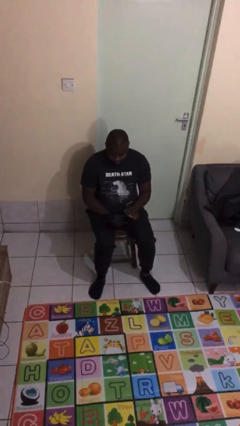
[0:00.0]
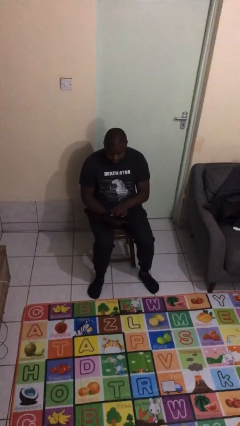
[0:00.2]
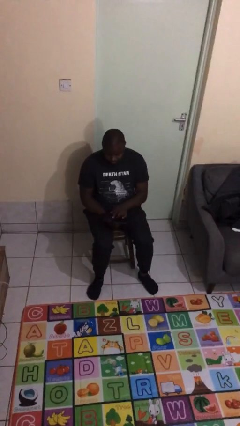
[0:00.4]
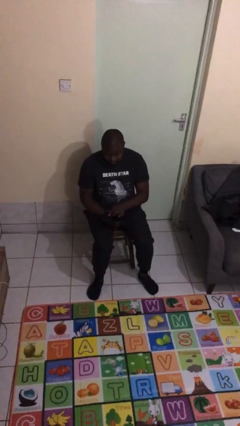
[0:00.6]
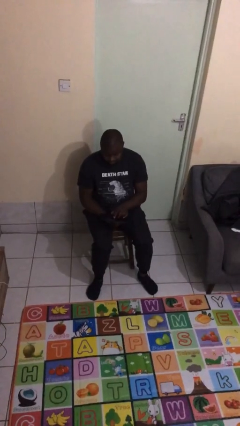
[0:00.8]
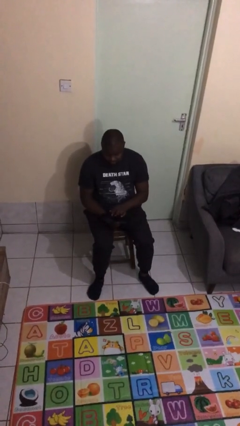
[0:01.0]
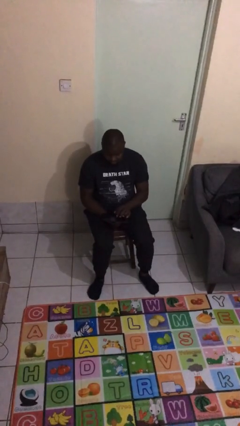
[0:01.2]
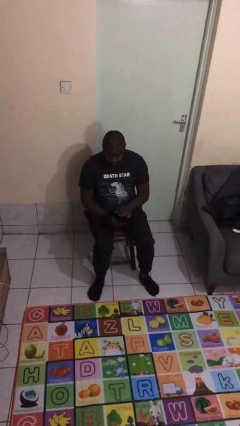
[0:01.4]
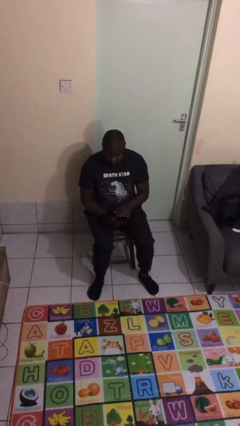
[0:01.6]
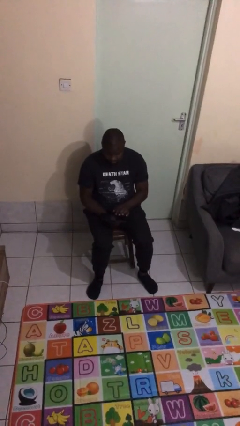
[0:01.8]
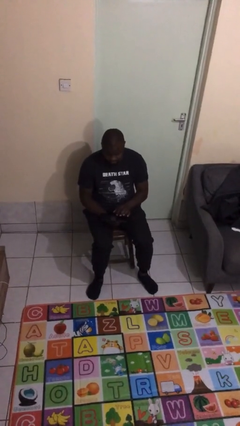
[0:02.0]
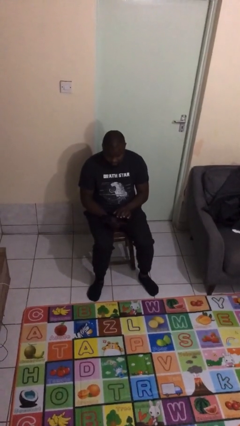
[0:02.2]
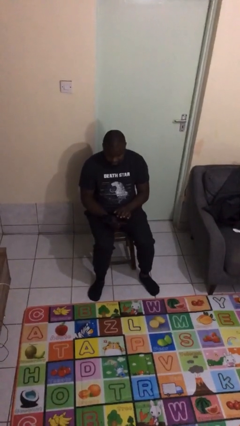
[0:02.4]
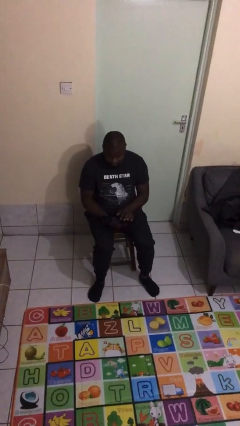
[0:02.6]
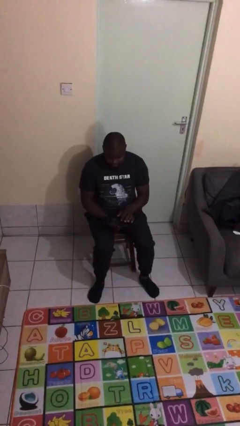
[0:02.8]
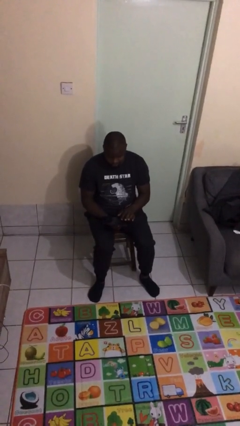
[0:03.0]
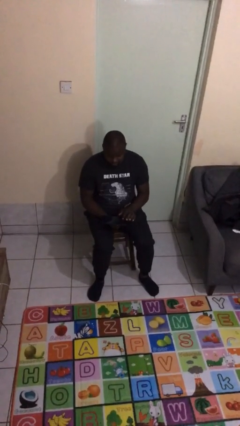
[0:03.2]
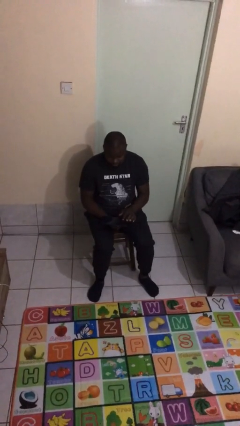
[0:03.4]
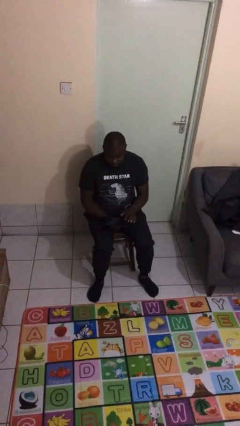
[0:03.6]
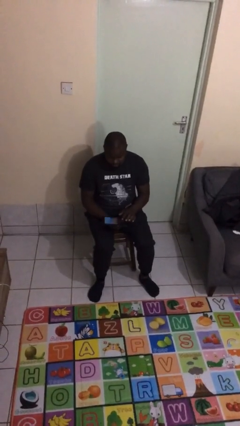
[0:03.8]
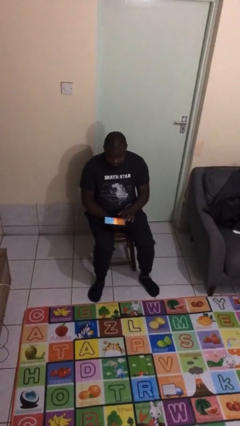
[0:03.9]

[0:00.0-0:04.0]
person interacts with tablet

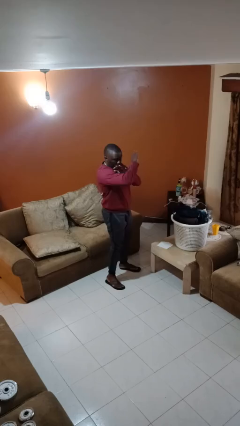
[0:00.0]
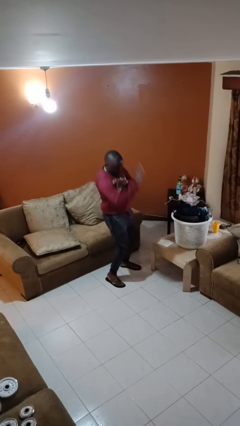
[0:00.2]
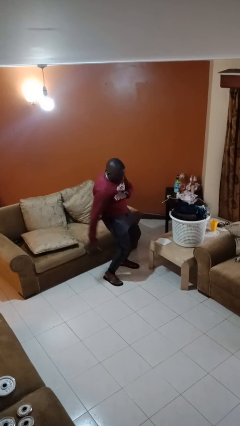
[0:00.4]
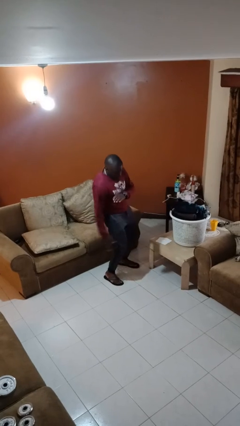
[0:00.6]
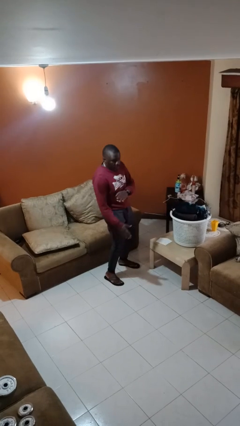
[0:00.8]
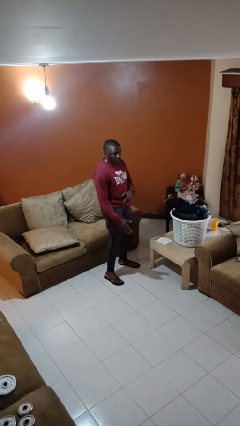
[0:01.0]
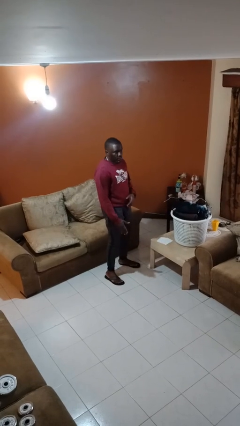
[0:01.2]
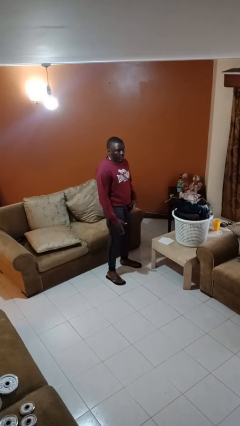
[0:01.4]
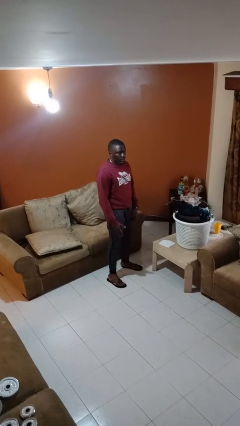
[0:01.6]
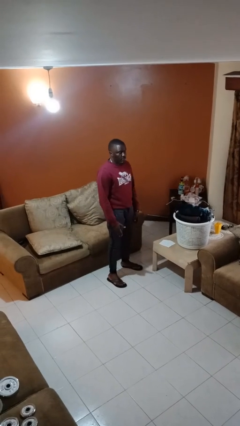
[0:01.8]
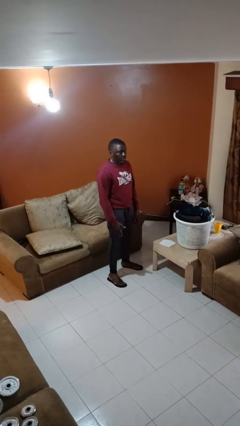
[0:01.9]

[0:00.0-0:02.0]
person karate chop

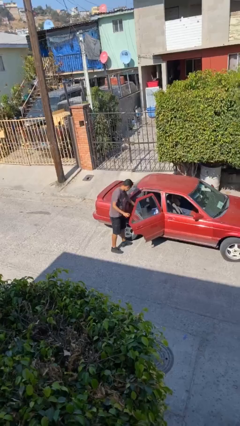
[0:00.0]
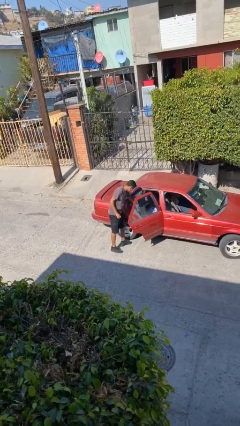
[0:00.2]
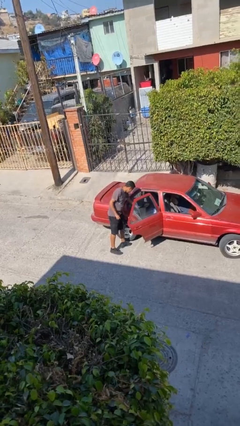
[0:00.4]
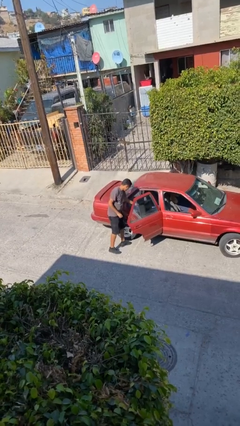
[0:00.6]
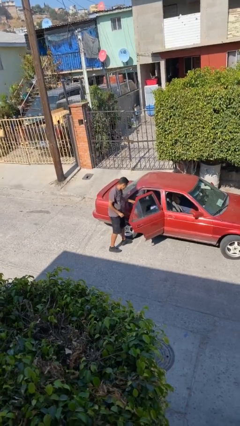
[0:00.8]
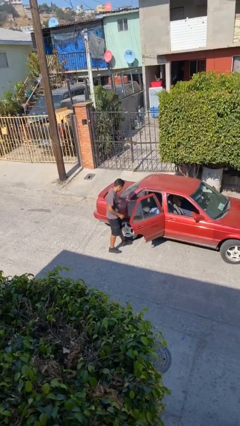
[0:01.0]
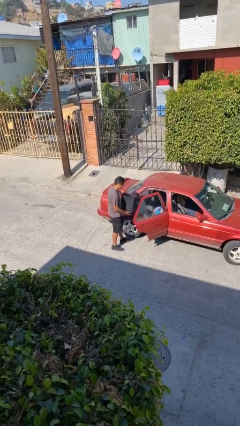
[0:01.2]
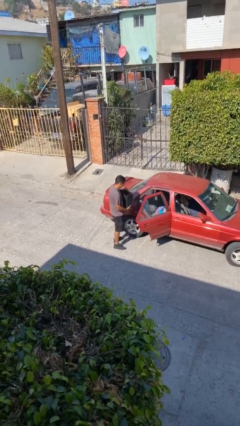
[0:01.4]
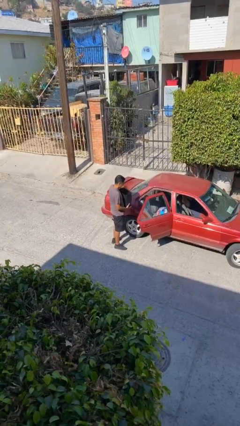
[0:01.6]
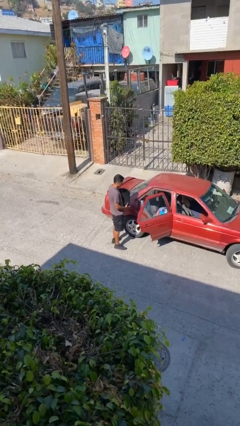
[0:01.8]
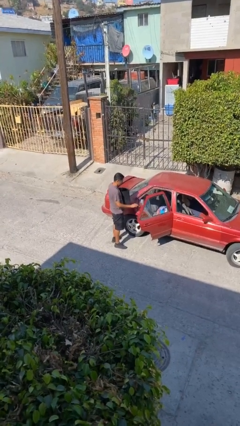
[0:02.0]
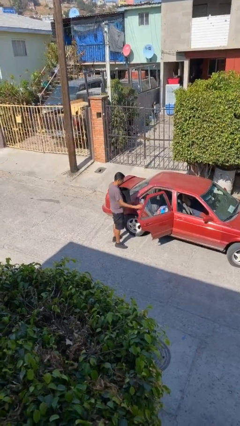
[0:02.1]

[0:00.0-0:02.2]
person unloads car

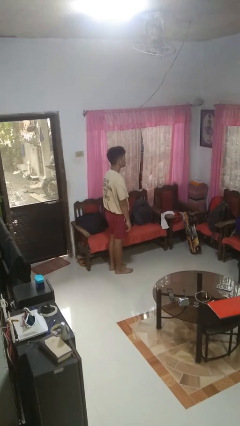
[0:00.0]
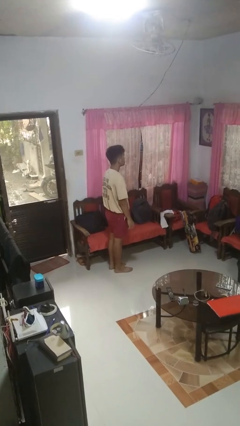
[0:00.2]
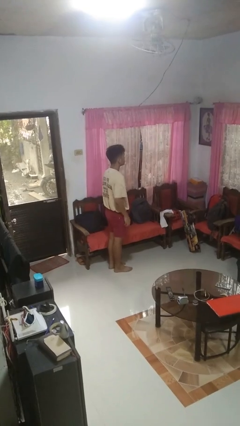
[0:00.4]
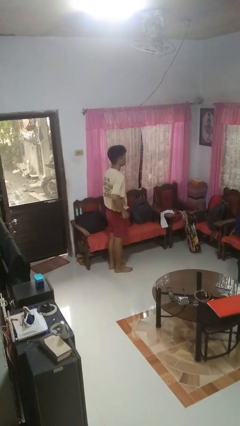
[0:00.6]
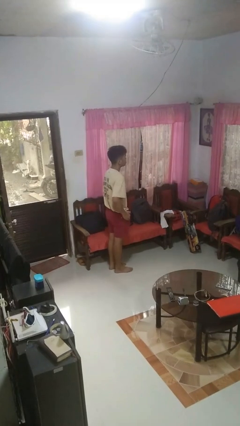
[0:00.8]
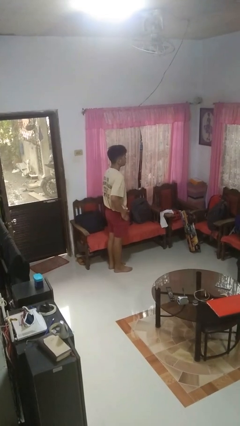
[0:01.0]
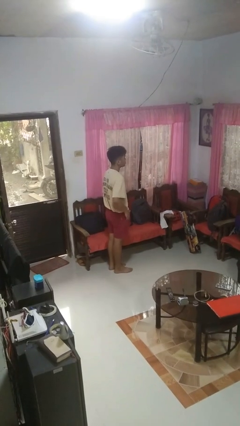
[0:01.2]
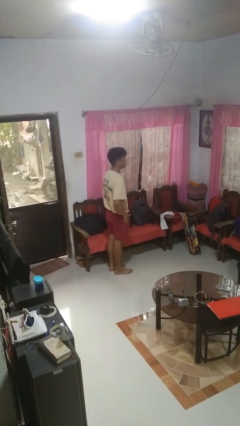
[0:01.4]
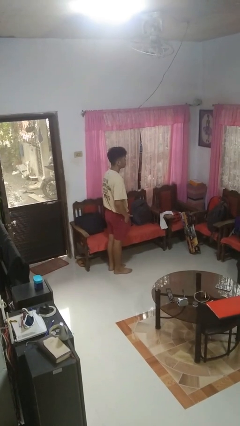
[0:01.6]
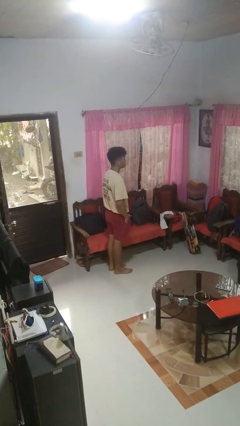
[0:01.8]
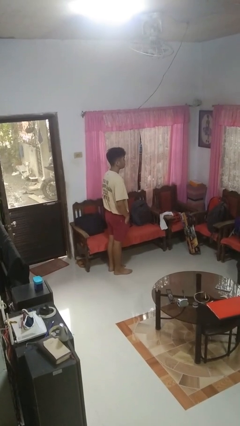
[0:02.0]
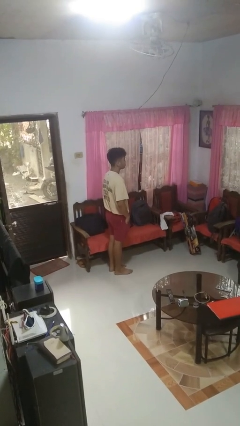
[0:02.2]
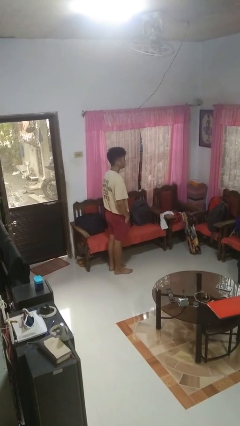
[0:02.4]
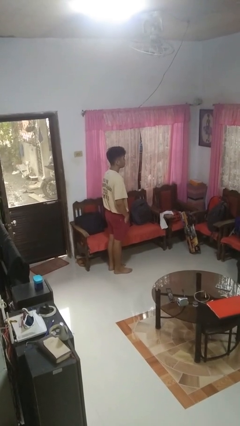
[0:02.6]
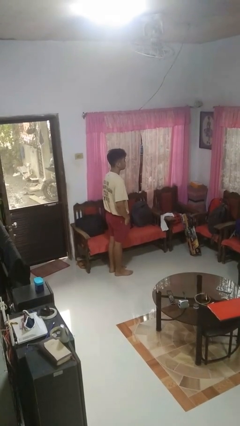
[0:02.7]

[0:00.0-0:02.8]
person puts hands in back pockets

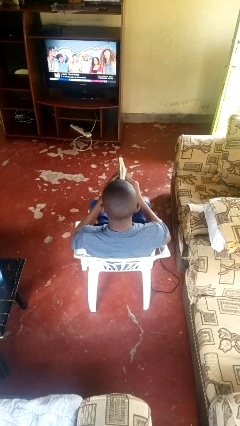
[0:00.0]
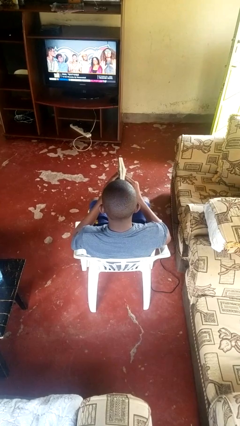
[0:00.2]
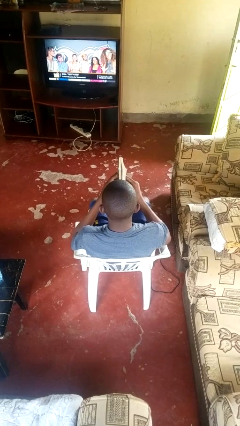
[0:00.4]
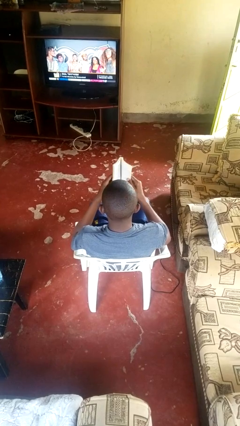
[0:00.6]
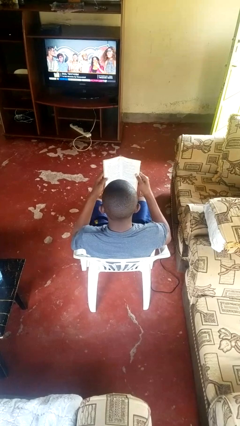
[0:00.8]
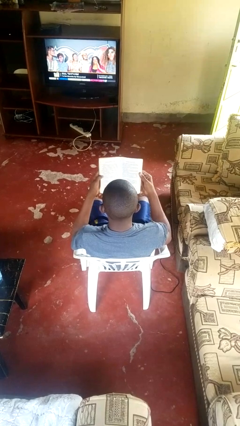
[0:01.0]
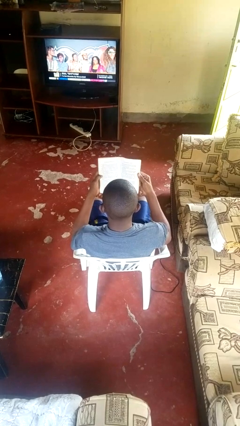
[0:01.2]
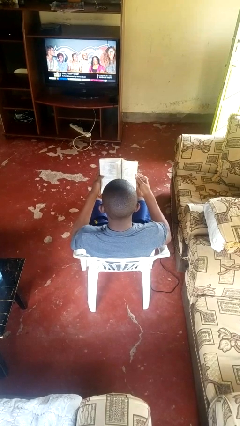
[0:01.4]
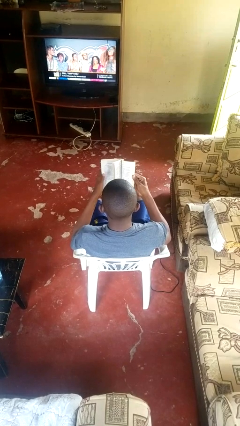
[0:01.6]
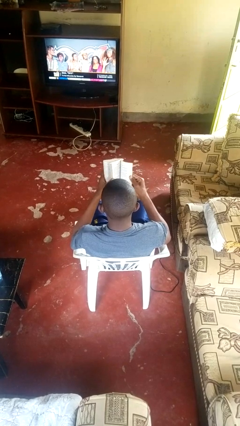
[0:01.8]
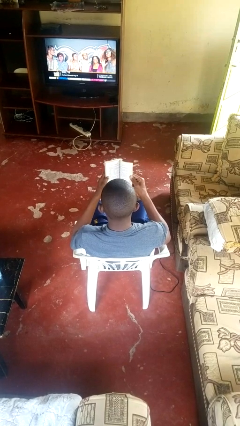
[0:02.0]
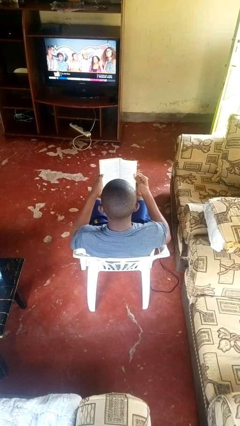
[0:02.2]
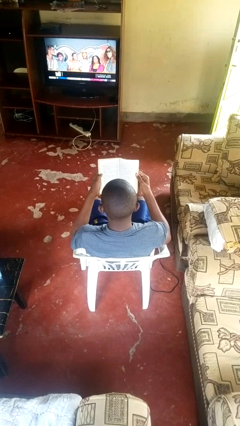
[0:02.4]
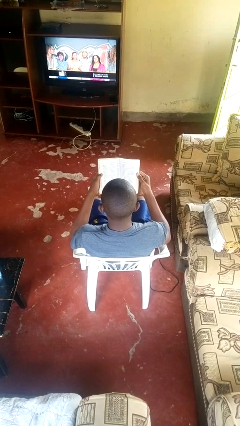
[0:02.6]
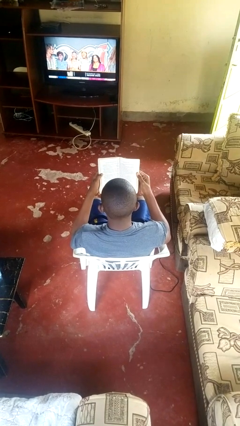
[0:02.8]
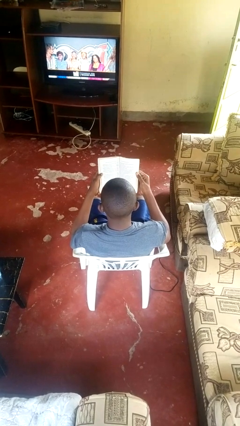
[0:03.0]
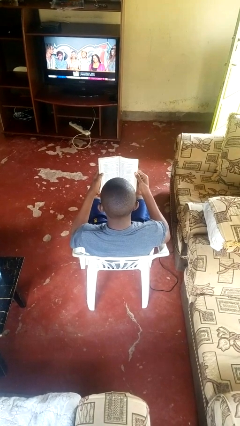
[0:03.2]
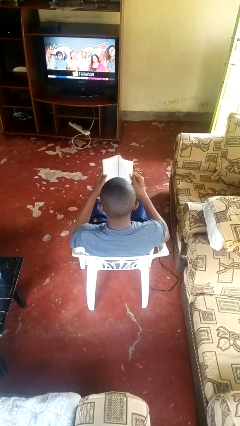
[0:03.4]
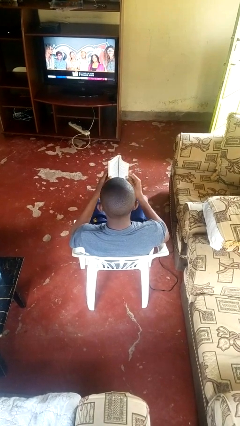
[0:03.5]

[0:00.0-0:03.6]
person reads book

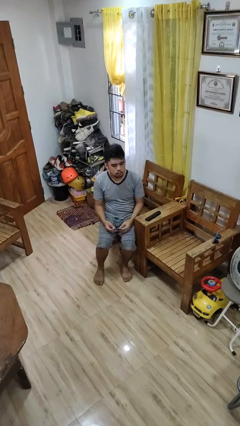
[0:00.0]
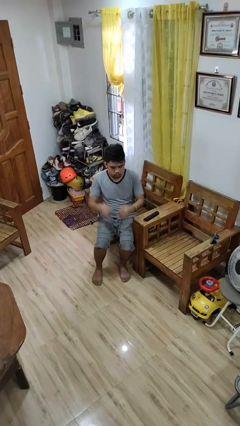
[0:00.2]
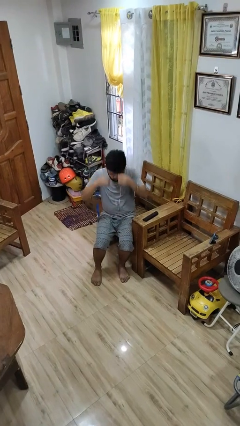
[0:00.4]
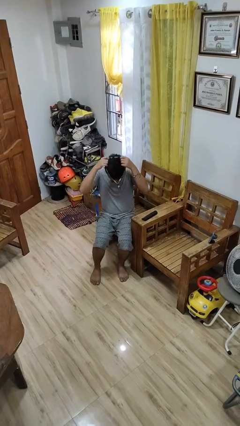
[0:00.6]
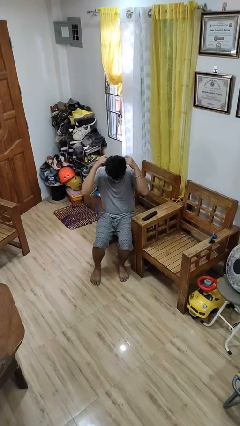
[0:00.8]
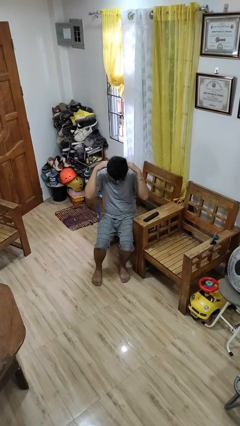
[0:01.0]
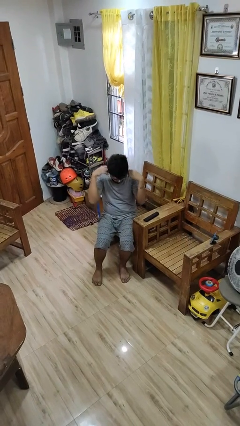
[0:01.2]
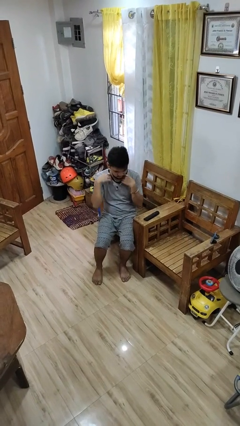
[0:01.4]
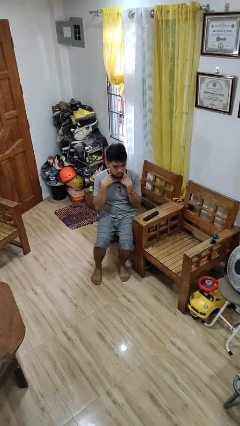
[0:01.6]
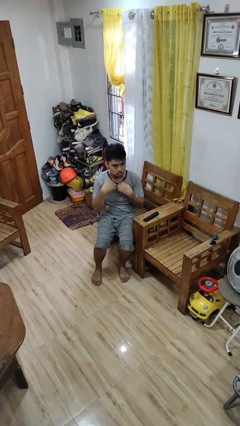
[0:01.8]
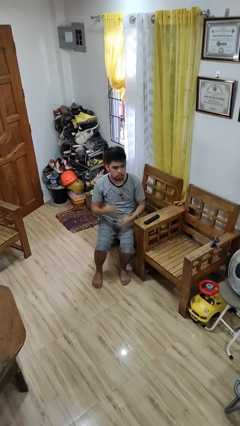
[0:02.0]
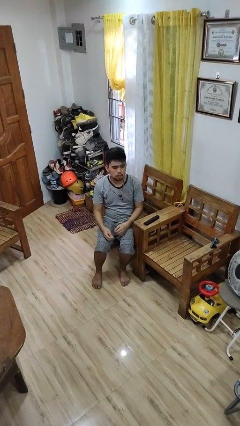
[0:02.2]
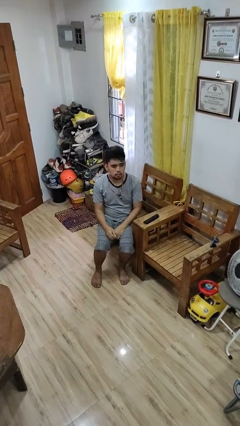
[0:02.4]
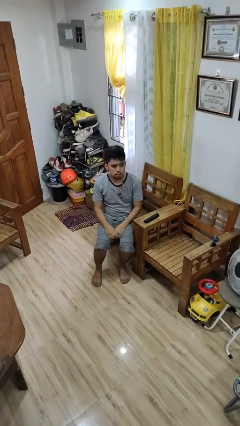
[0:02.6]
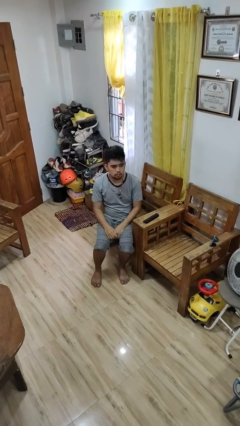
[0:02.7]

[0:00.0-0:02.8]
person puts on necklace
